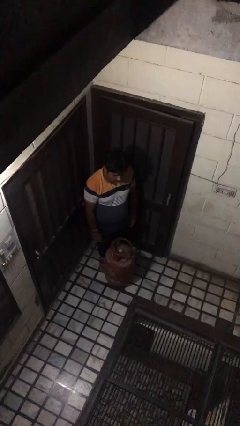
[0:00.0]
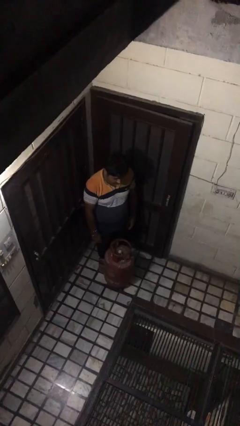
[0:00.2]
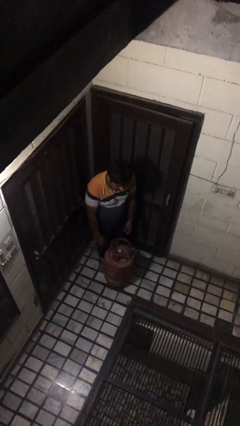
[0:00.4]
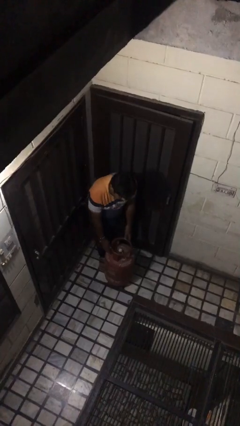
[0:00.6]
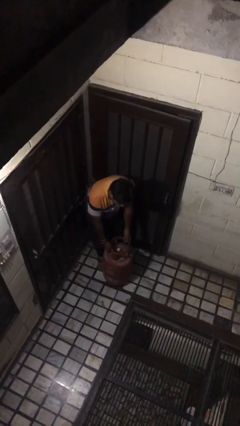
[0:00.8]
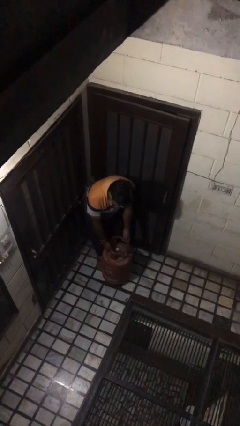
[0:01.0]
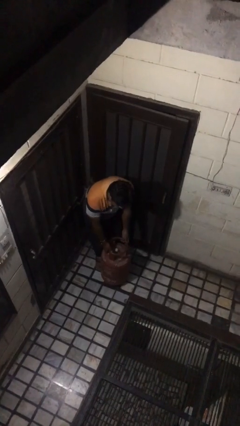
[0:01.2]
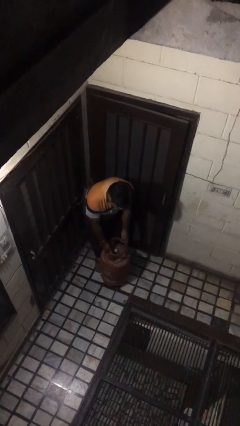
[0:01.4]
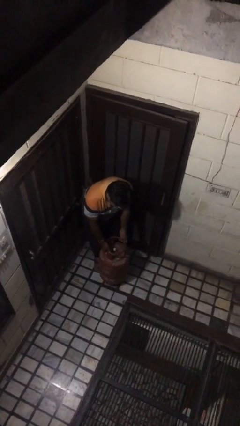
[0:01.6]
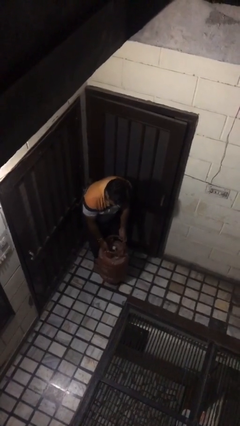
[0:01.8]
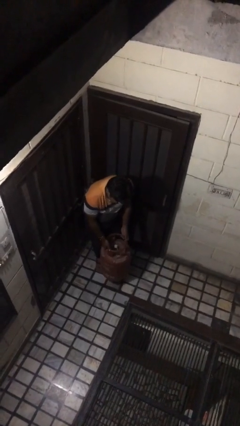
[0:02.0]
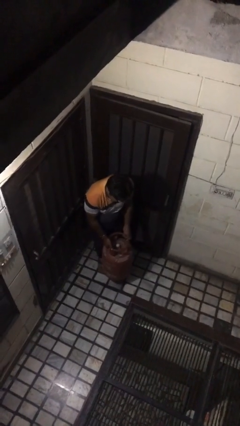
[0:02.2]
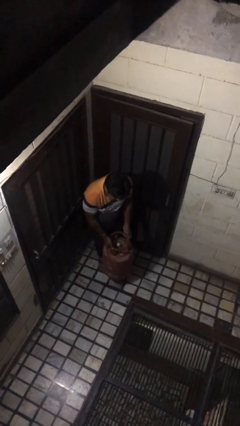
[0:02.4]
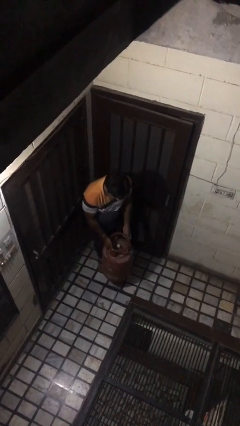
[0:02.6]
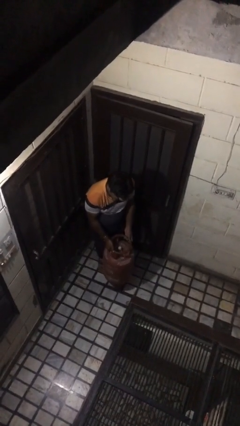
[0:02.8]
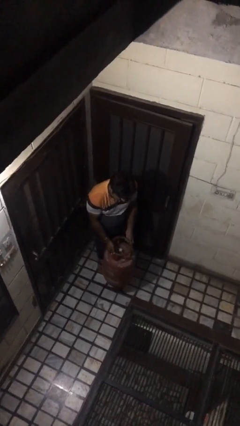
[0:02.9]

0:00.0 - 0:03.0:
person picks up object from floor

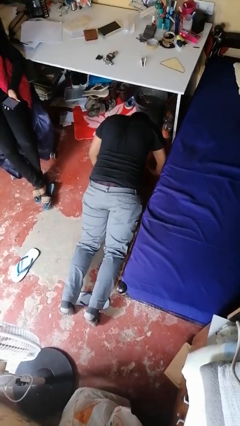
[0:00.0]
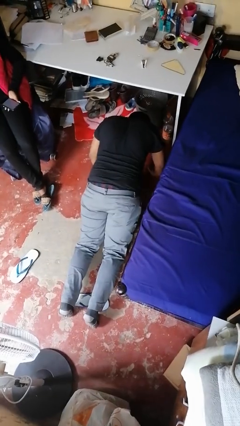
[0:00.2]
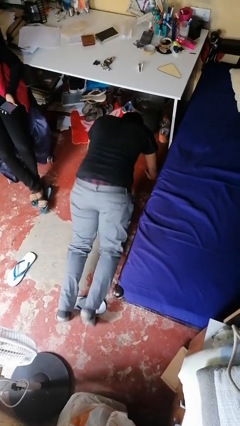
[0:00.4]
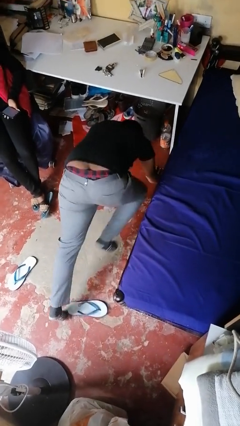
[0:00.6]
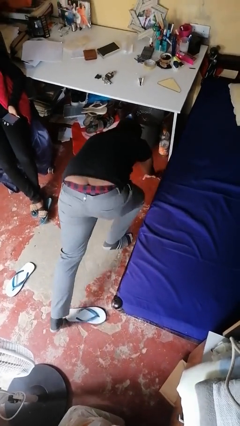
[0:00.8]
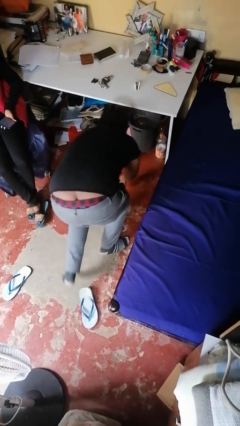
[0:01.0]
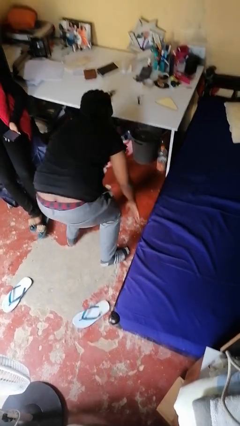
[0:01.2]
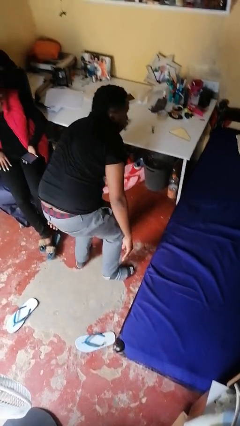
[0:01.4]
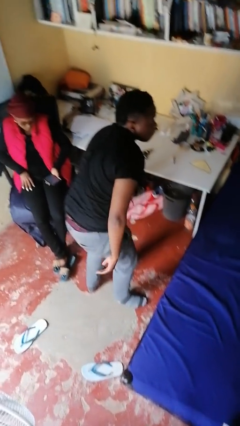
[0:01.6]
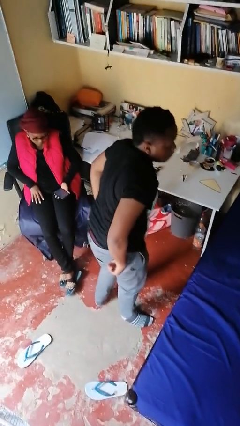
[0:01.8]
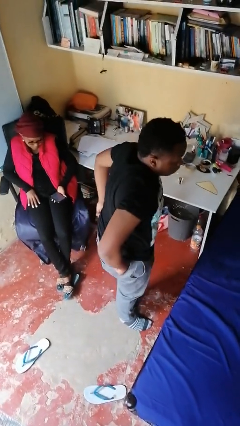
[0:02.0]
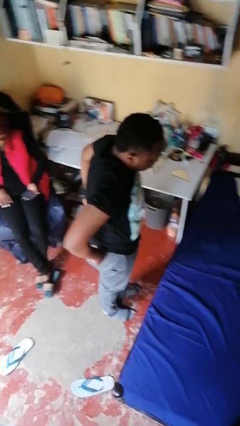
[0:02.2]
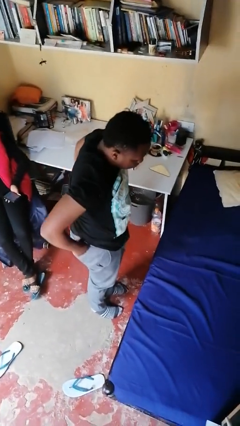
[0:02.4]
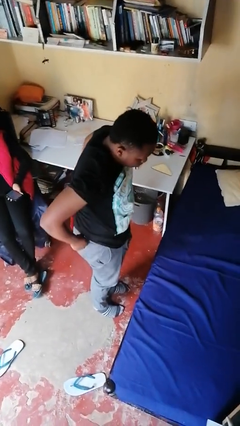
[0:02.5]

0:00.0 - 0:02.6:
person stands up from floor

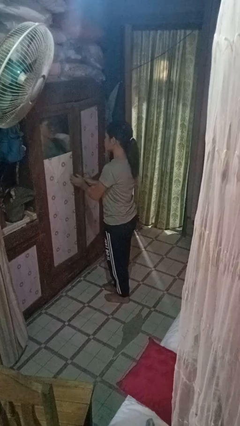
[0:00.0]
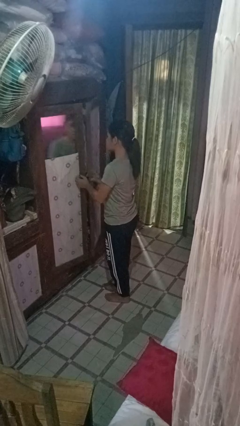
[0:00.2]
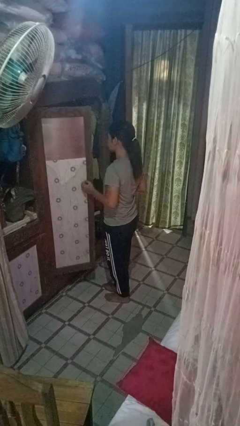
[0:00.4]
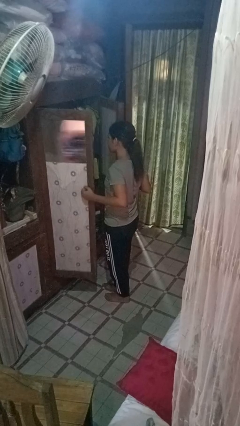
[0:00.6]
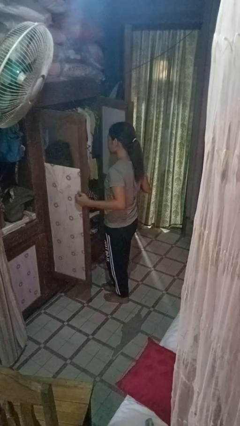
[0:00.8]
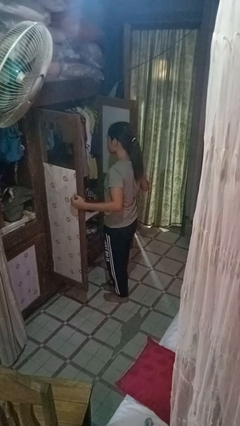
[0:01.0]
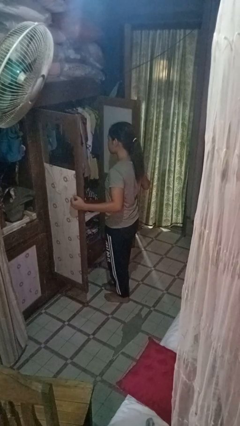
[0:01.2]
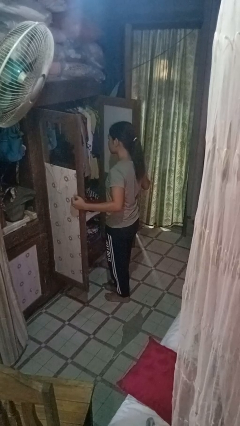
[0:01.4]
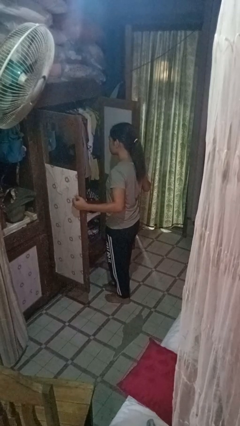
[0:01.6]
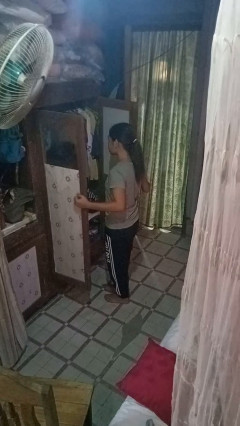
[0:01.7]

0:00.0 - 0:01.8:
person opens closet door

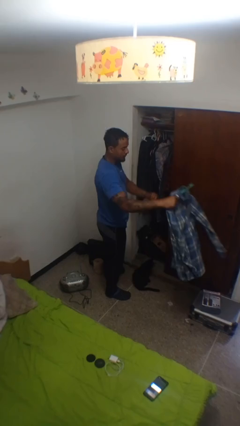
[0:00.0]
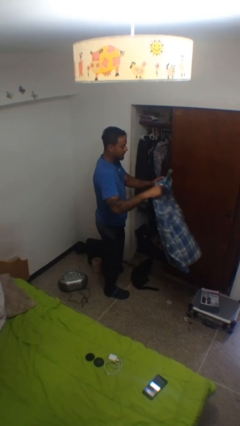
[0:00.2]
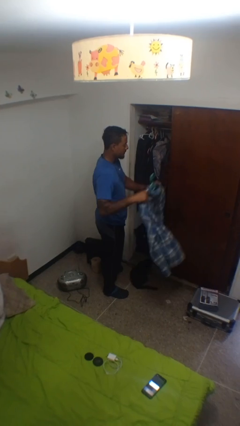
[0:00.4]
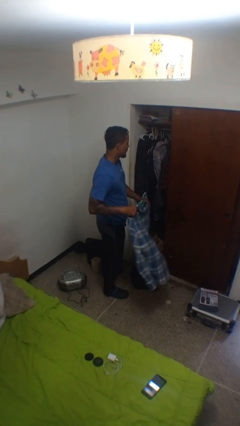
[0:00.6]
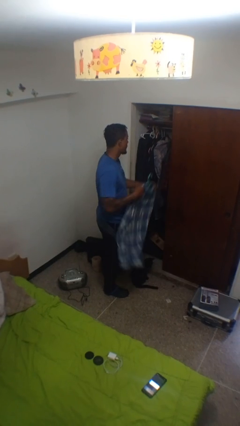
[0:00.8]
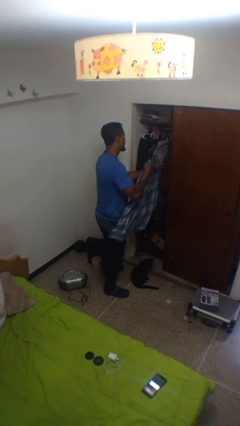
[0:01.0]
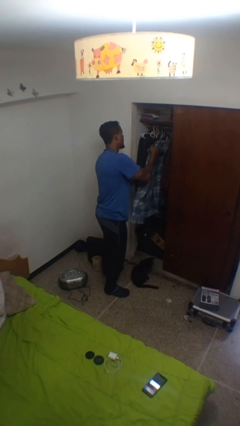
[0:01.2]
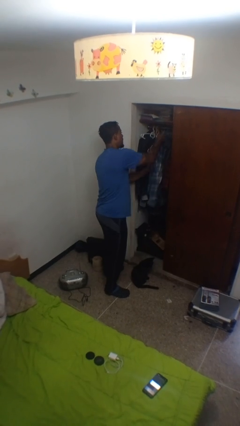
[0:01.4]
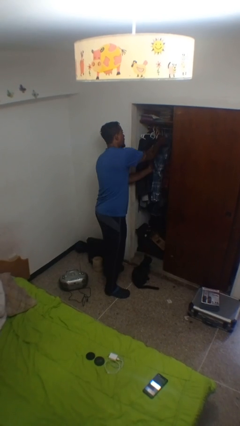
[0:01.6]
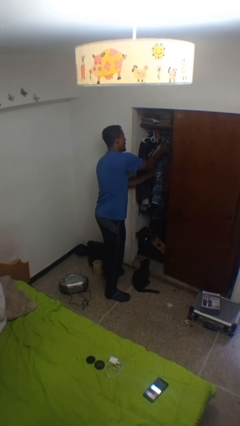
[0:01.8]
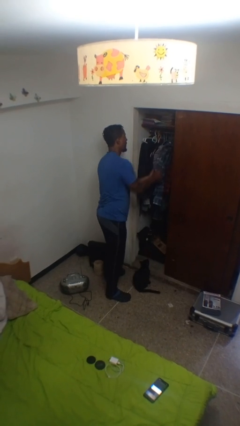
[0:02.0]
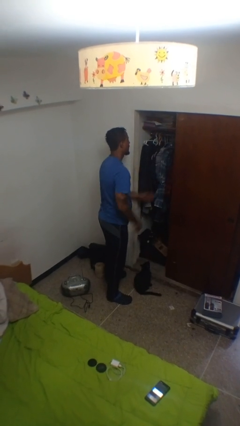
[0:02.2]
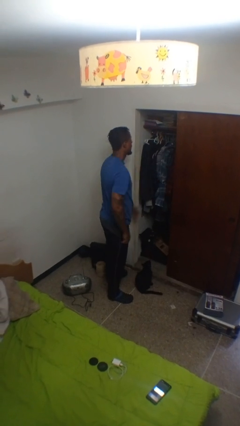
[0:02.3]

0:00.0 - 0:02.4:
person puts clothes into closet

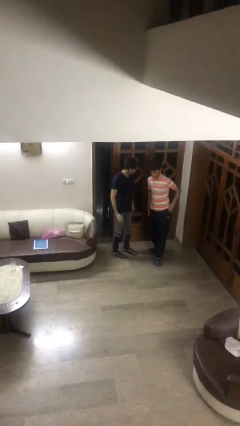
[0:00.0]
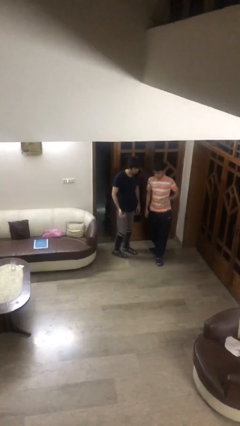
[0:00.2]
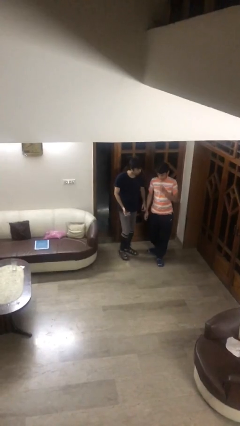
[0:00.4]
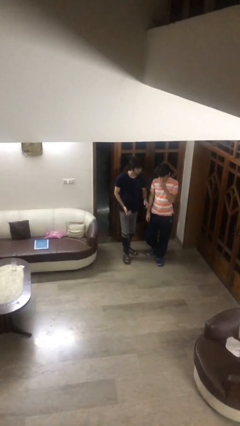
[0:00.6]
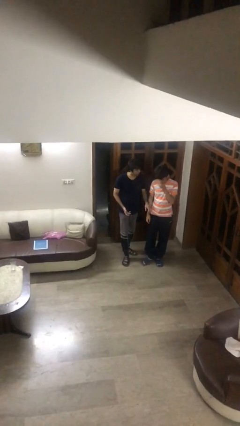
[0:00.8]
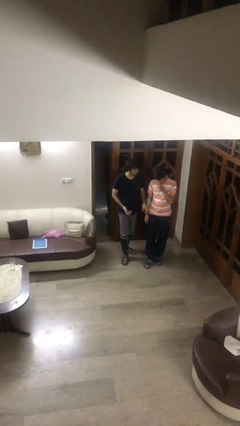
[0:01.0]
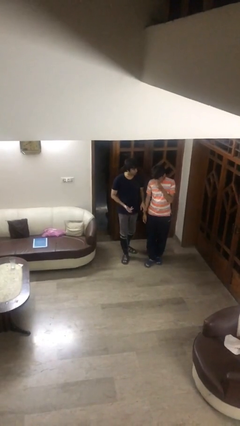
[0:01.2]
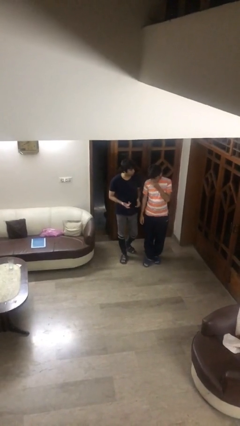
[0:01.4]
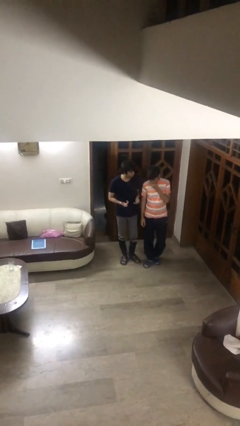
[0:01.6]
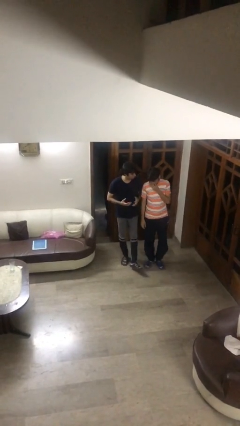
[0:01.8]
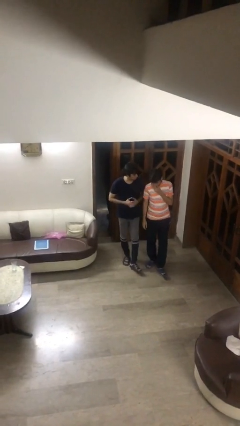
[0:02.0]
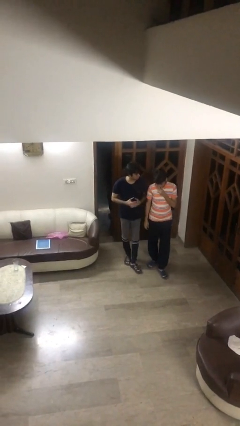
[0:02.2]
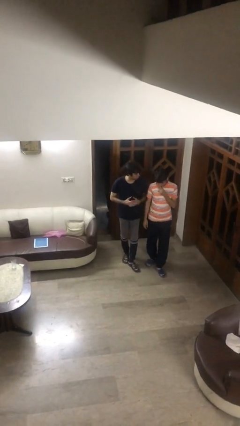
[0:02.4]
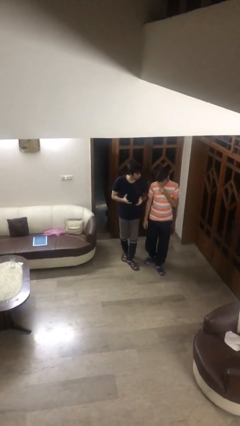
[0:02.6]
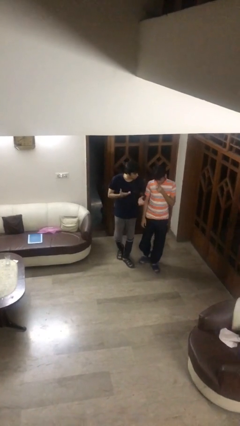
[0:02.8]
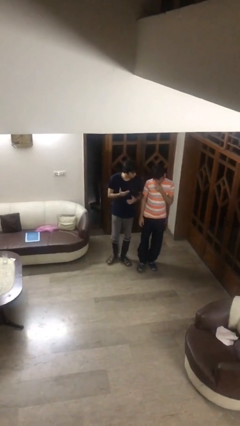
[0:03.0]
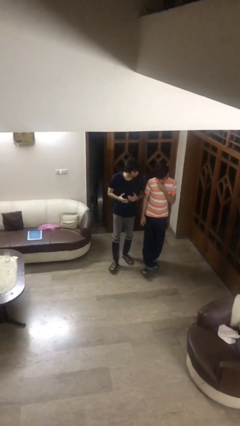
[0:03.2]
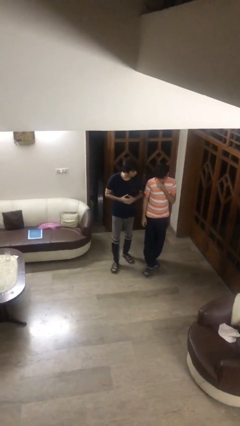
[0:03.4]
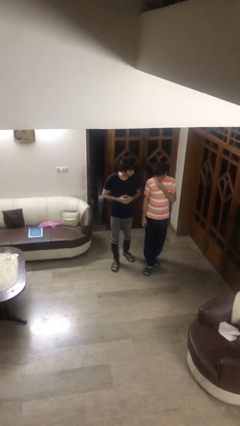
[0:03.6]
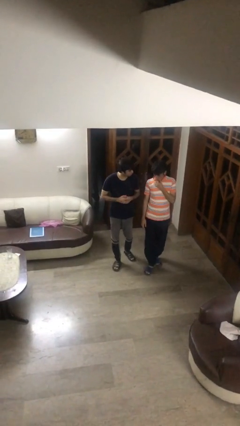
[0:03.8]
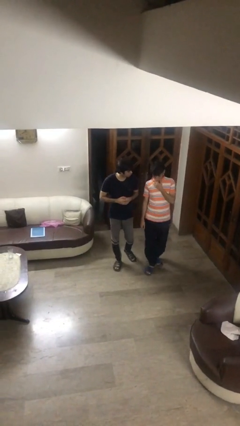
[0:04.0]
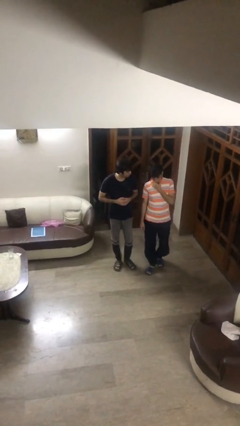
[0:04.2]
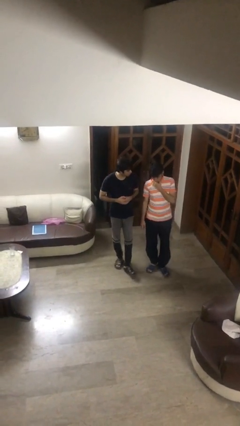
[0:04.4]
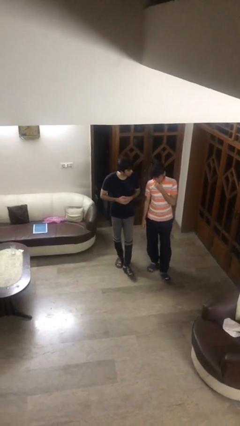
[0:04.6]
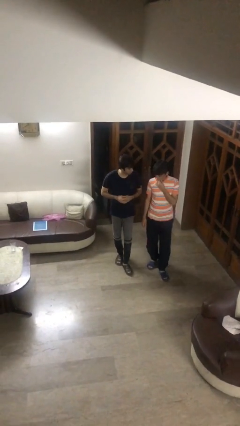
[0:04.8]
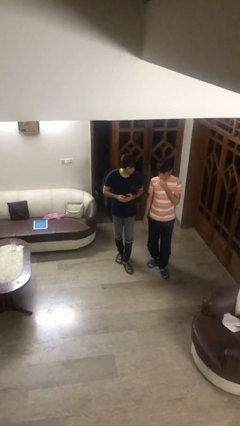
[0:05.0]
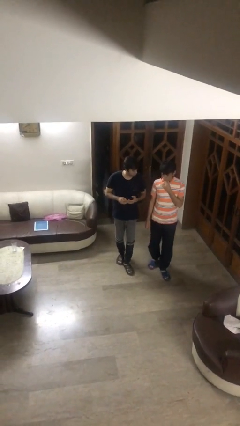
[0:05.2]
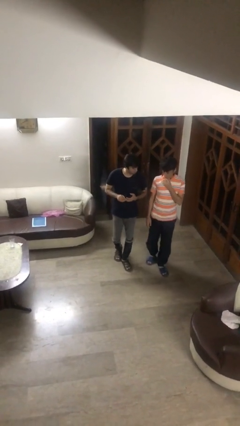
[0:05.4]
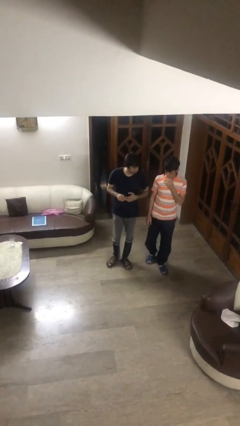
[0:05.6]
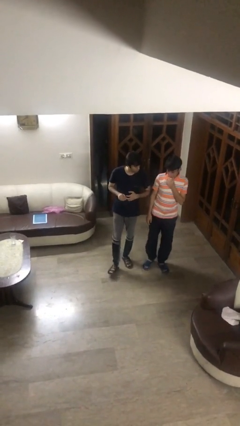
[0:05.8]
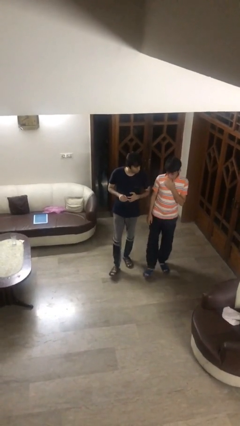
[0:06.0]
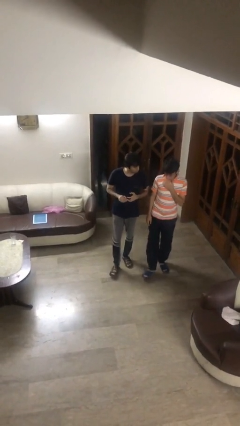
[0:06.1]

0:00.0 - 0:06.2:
person talks to person

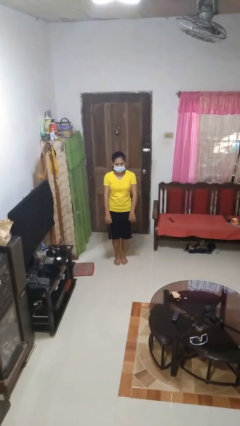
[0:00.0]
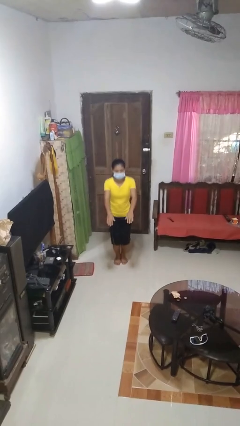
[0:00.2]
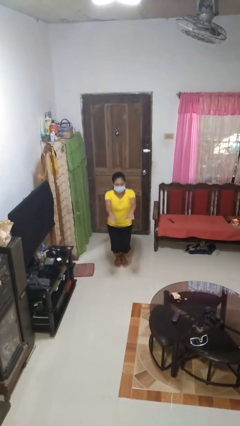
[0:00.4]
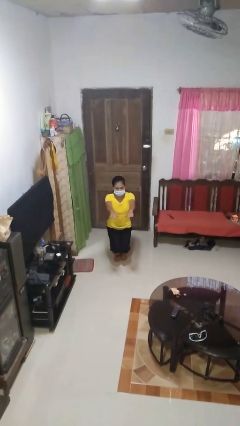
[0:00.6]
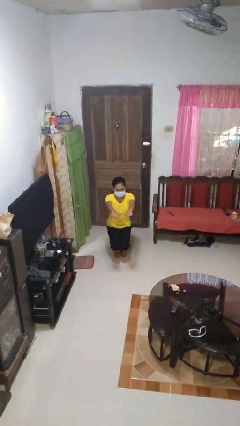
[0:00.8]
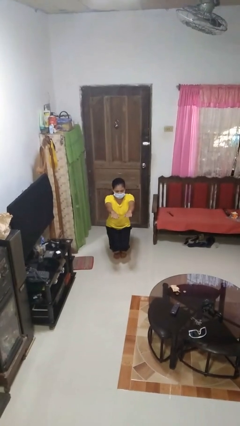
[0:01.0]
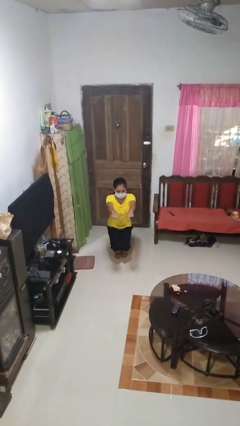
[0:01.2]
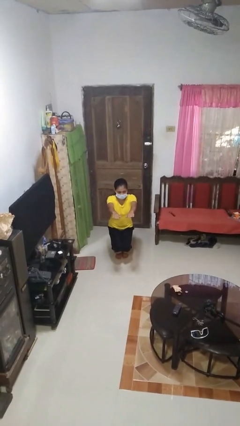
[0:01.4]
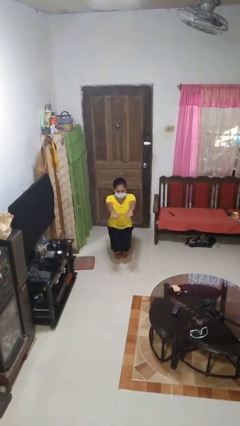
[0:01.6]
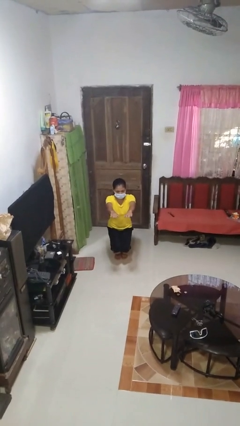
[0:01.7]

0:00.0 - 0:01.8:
person squats
